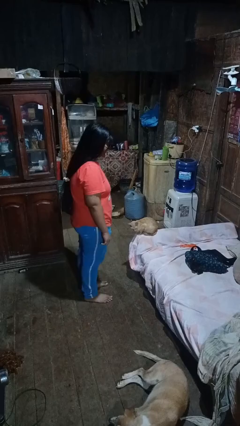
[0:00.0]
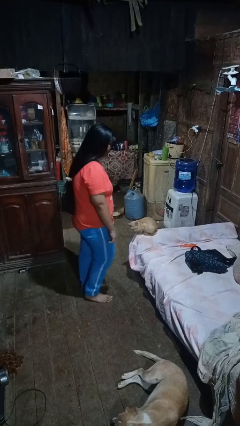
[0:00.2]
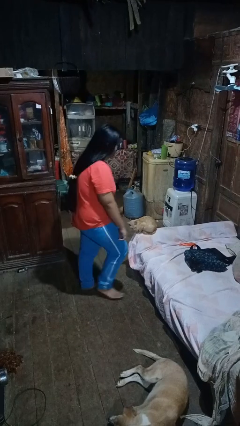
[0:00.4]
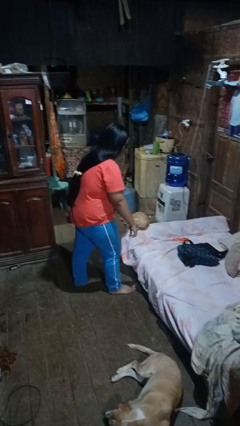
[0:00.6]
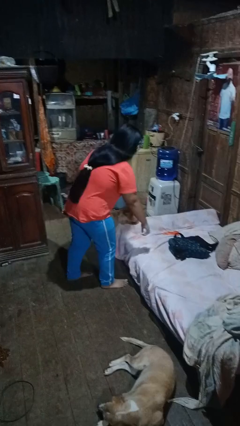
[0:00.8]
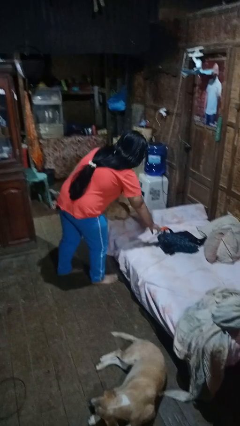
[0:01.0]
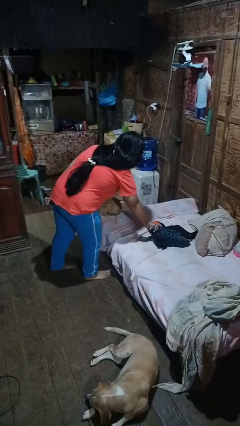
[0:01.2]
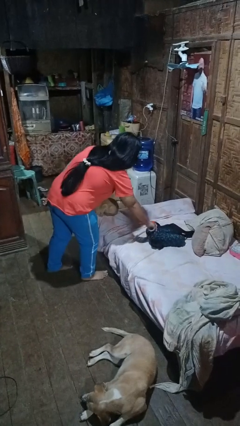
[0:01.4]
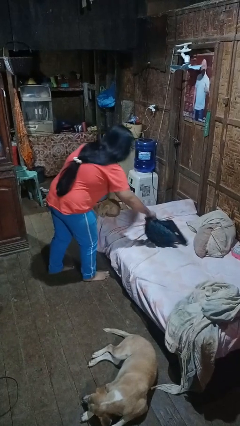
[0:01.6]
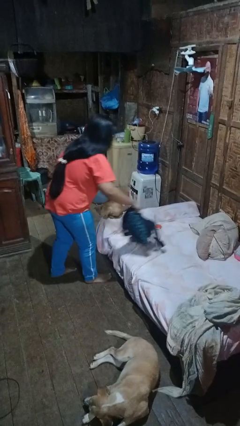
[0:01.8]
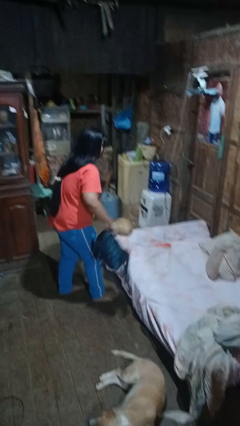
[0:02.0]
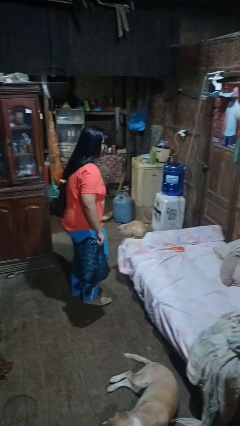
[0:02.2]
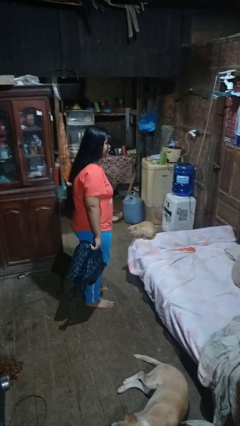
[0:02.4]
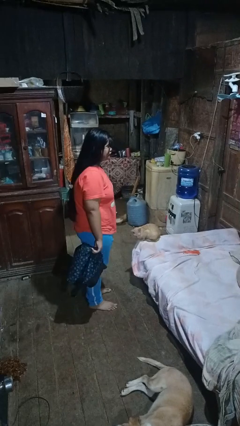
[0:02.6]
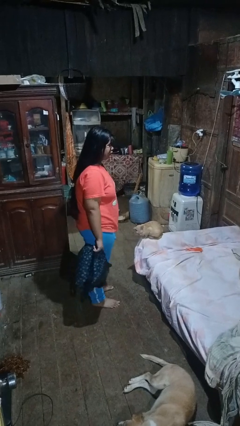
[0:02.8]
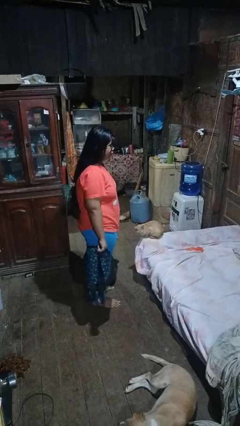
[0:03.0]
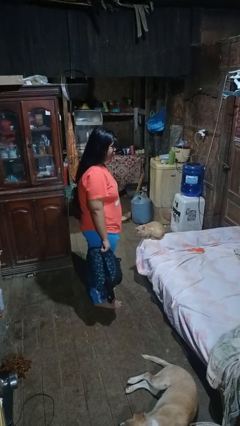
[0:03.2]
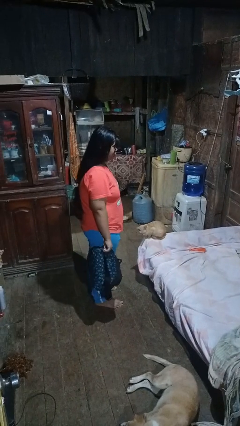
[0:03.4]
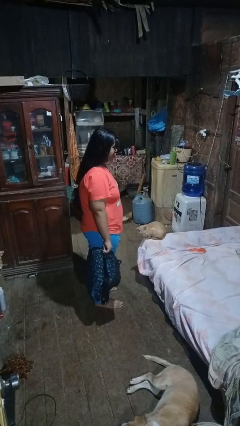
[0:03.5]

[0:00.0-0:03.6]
person picks up object from bed

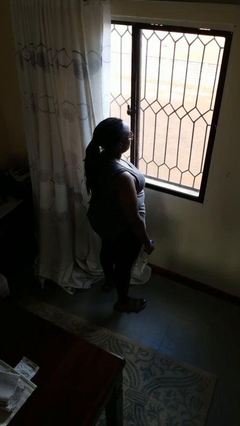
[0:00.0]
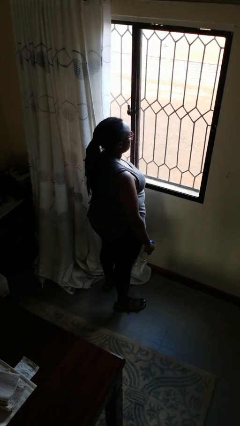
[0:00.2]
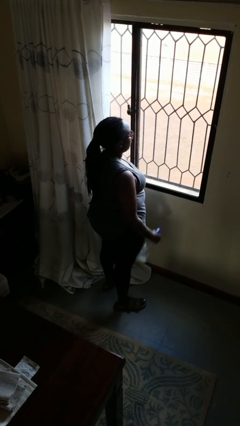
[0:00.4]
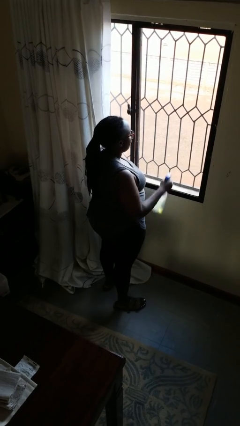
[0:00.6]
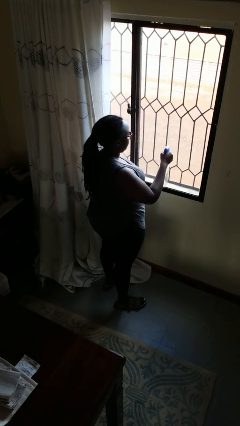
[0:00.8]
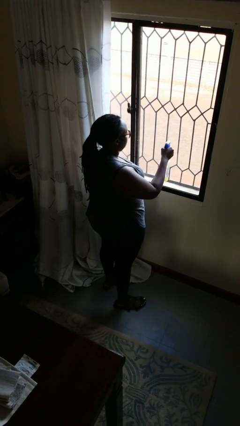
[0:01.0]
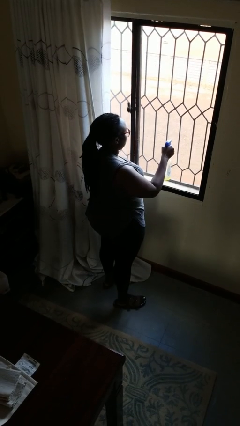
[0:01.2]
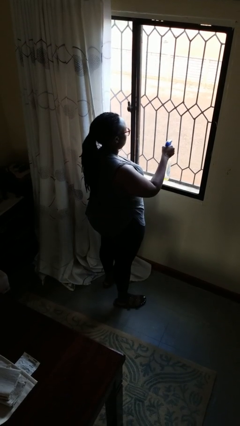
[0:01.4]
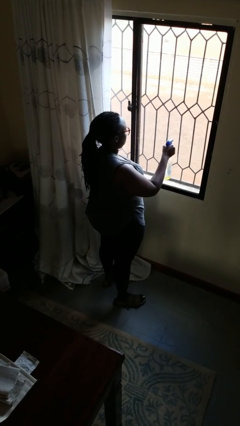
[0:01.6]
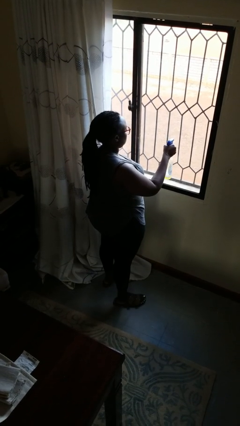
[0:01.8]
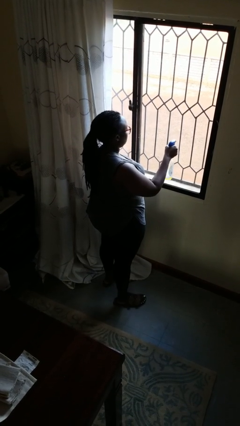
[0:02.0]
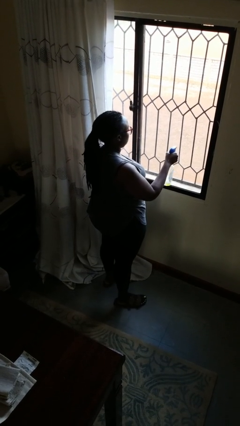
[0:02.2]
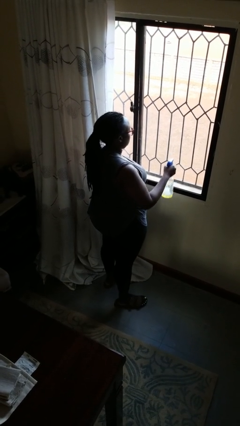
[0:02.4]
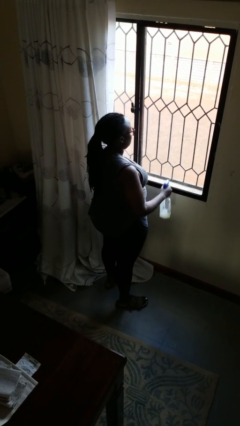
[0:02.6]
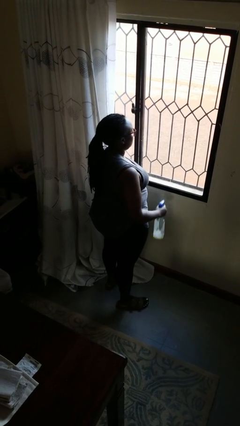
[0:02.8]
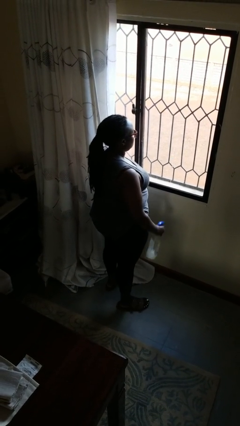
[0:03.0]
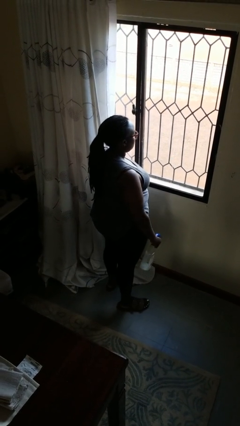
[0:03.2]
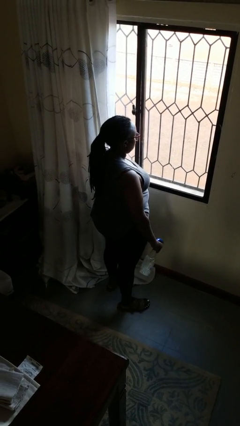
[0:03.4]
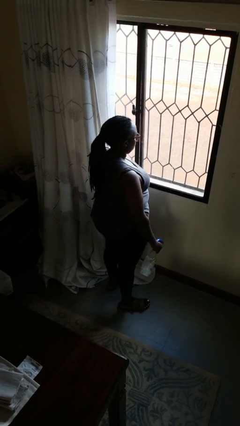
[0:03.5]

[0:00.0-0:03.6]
person sprays from bottle

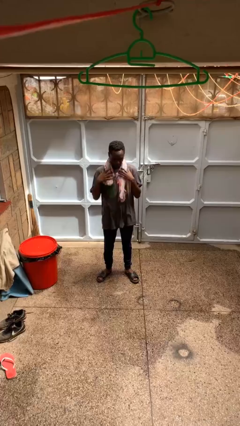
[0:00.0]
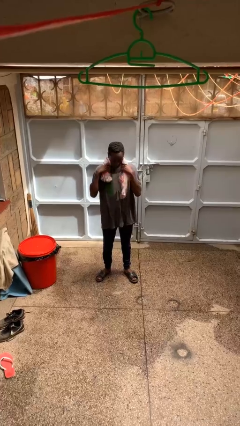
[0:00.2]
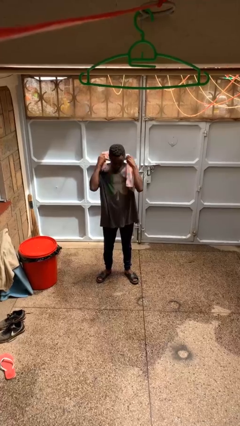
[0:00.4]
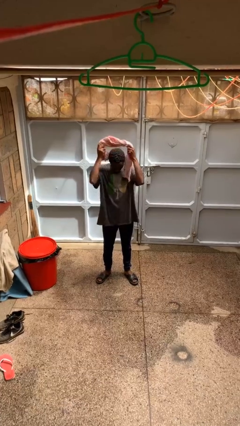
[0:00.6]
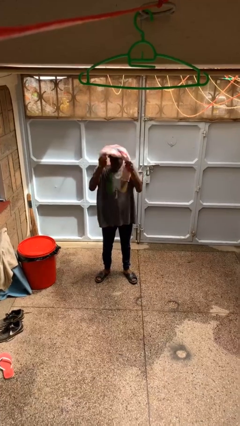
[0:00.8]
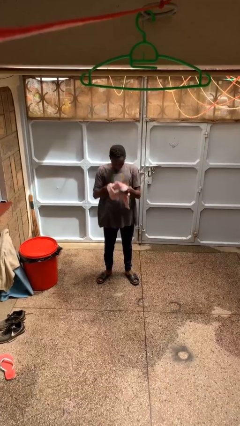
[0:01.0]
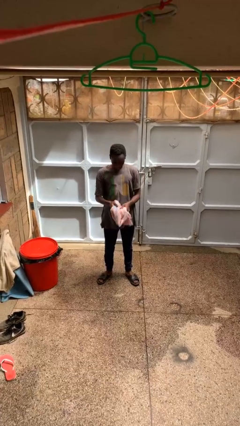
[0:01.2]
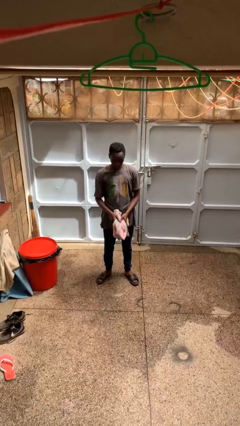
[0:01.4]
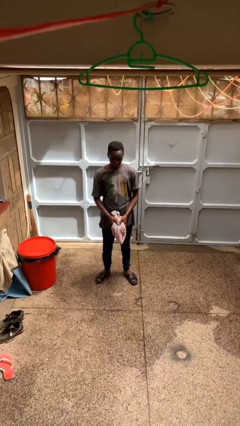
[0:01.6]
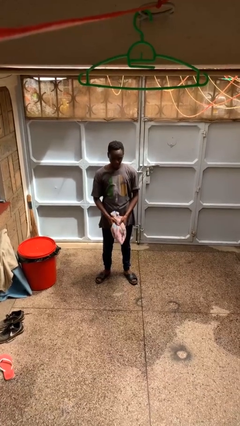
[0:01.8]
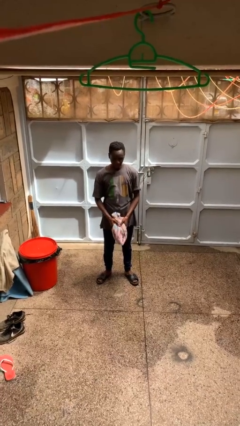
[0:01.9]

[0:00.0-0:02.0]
person takes off scarf

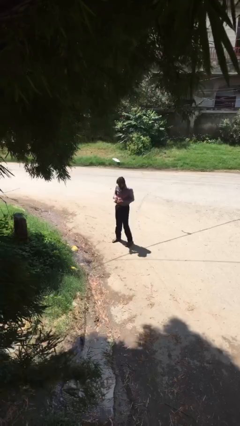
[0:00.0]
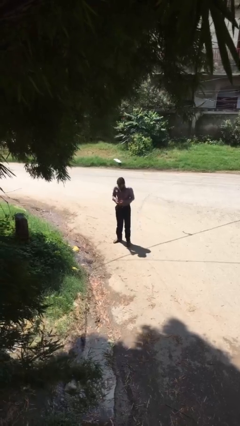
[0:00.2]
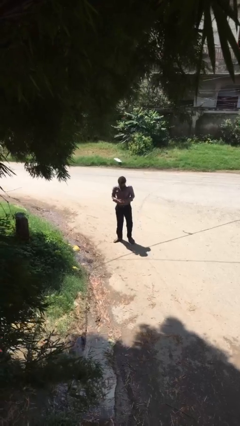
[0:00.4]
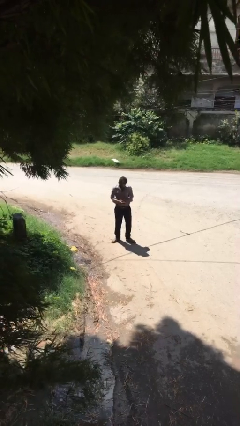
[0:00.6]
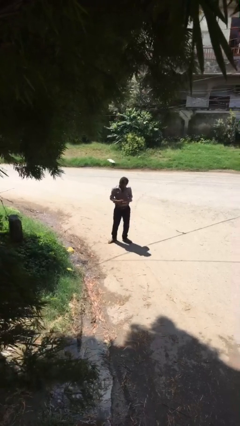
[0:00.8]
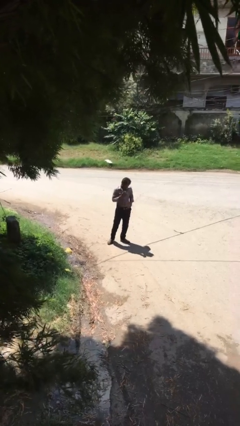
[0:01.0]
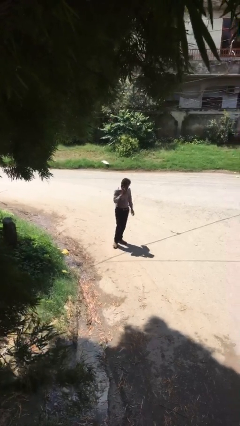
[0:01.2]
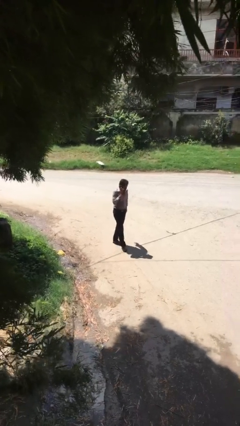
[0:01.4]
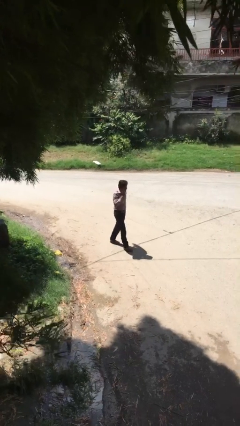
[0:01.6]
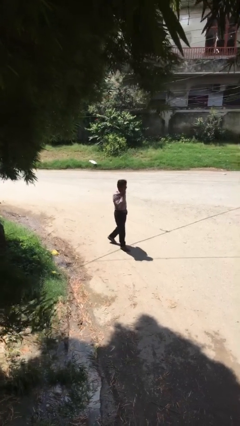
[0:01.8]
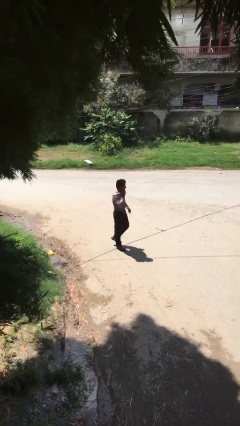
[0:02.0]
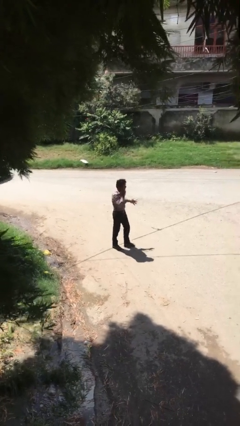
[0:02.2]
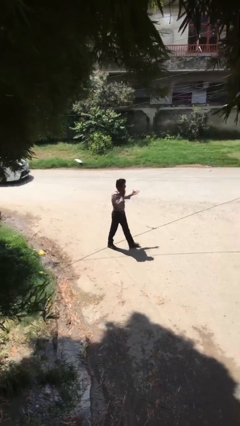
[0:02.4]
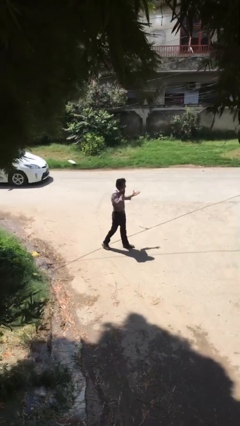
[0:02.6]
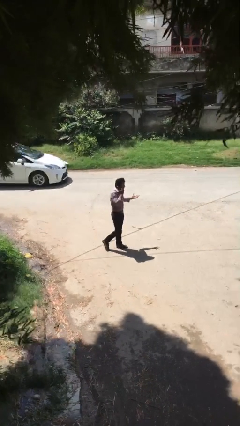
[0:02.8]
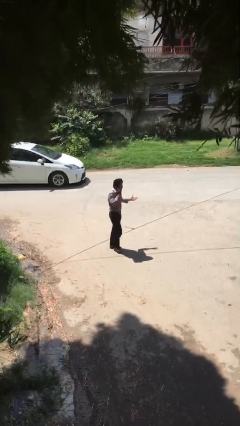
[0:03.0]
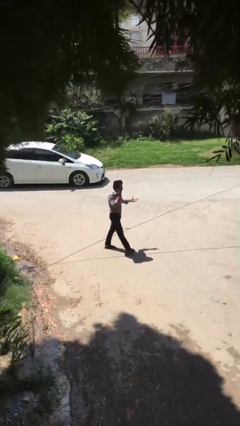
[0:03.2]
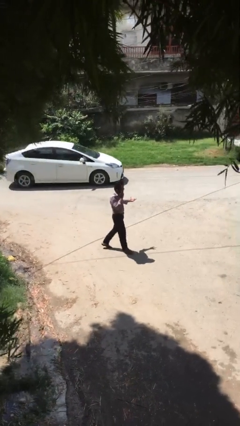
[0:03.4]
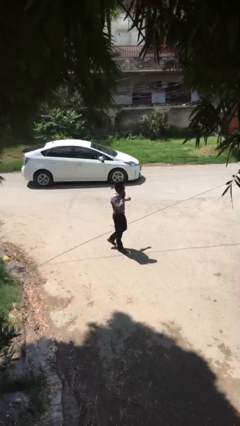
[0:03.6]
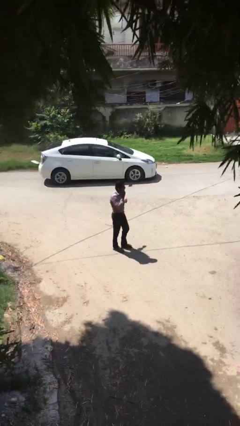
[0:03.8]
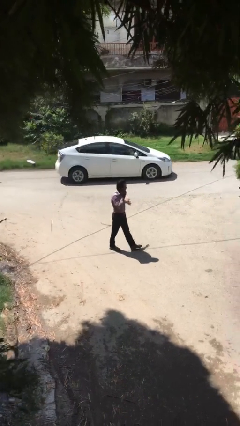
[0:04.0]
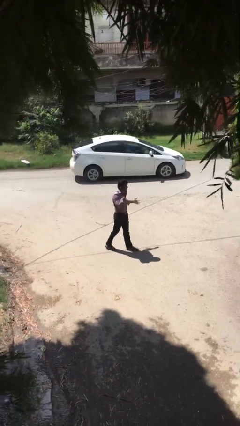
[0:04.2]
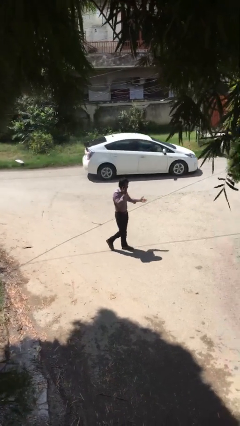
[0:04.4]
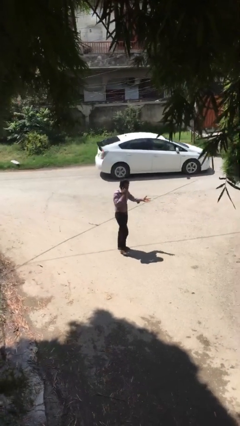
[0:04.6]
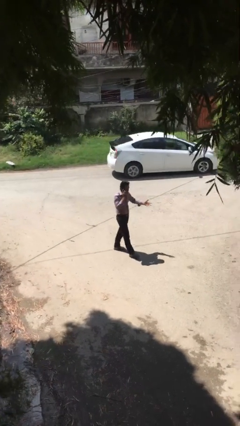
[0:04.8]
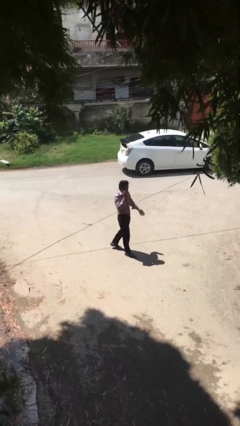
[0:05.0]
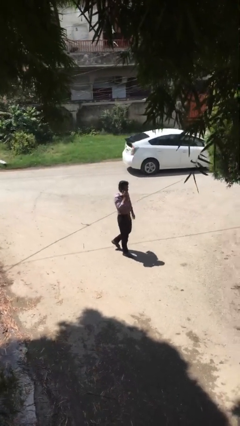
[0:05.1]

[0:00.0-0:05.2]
person talks on phone

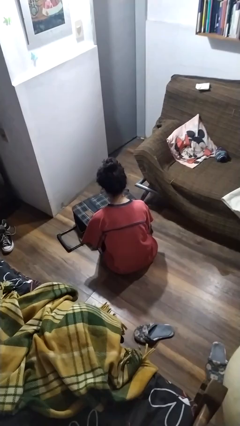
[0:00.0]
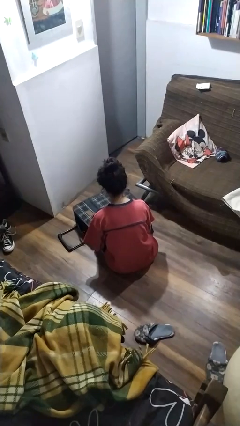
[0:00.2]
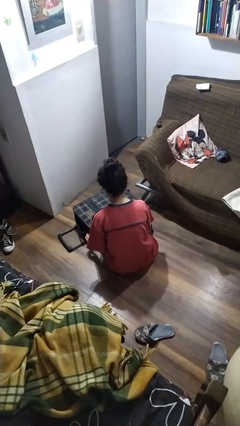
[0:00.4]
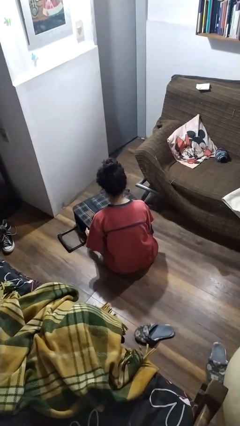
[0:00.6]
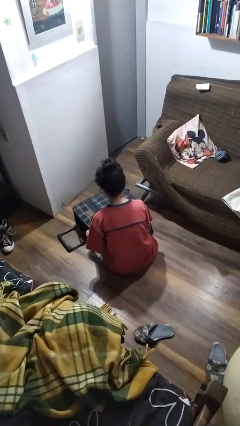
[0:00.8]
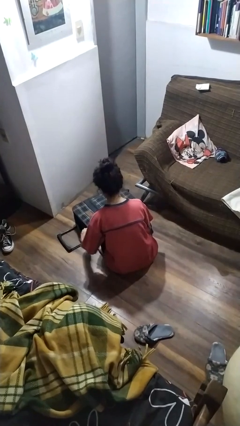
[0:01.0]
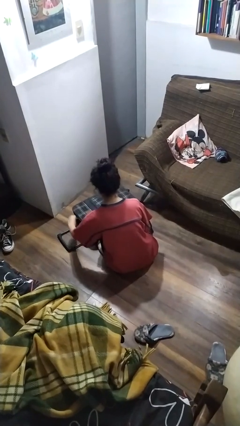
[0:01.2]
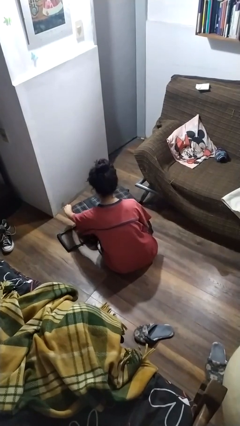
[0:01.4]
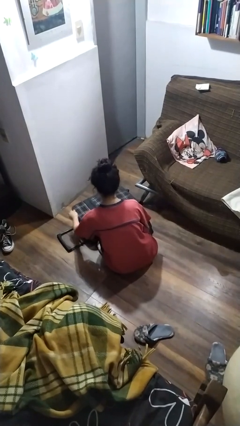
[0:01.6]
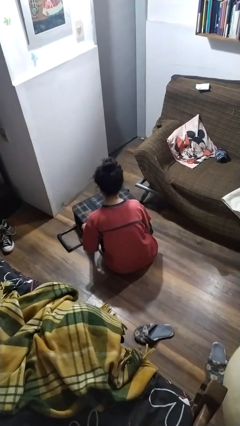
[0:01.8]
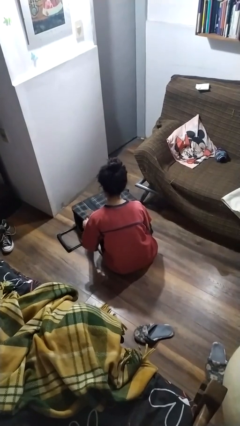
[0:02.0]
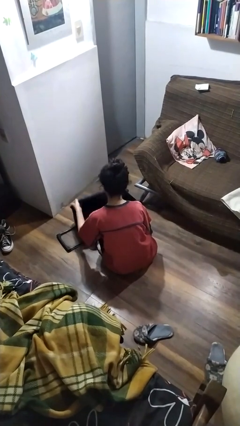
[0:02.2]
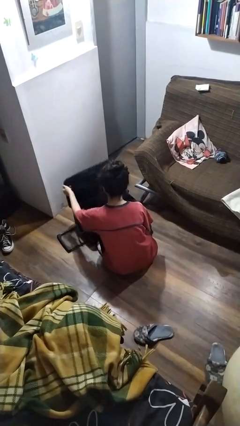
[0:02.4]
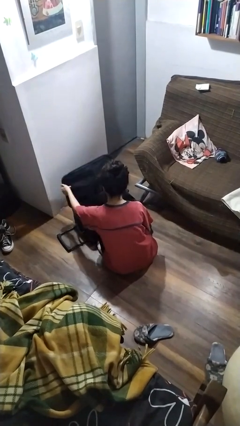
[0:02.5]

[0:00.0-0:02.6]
person opens suitcase

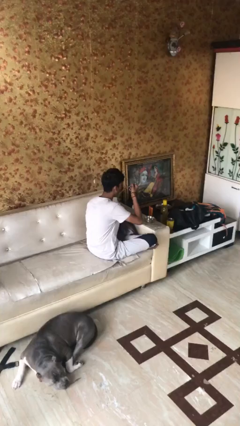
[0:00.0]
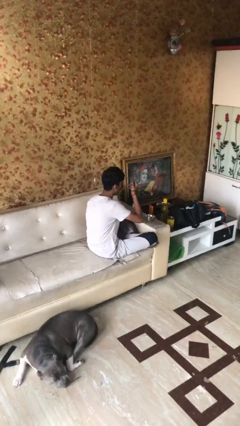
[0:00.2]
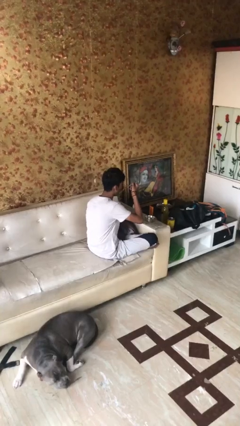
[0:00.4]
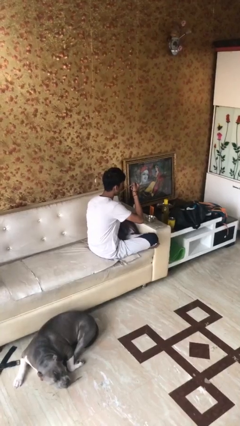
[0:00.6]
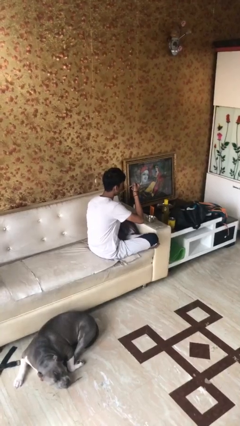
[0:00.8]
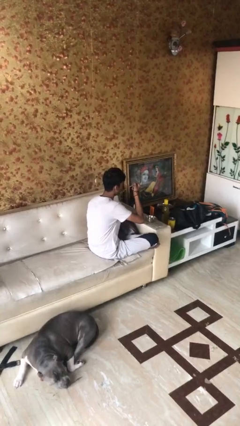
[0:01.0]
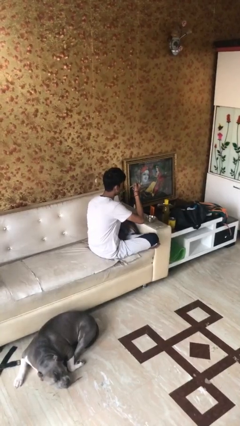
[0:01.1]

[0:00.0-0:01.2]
person eats with utensil
